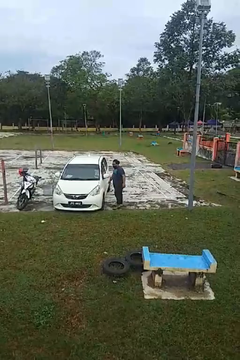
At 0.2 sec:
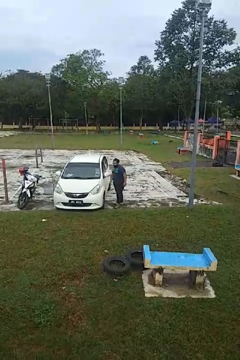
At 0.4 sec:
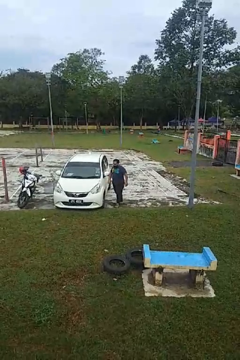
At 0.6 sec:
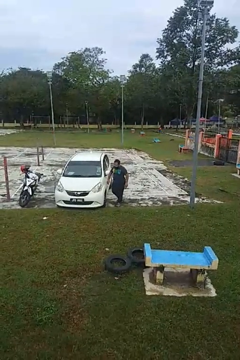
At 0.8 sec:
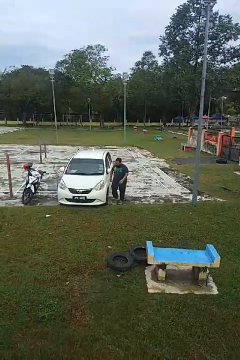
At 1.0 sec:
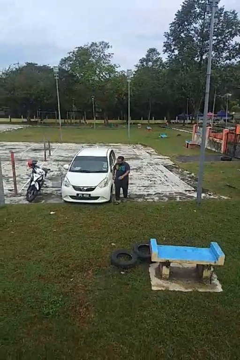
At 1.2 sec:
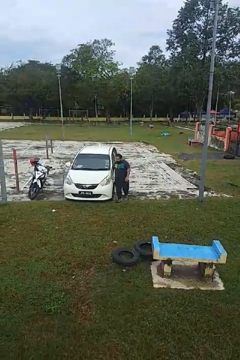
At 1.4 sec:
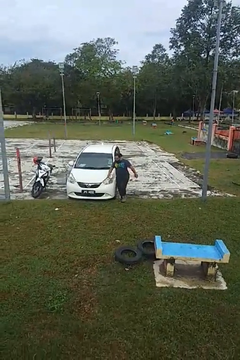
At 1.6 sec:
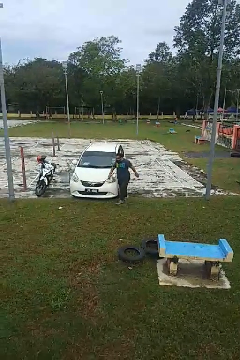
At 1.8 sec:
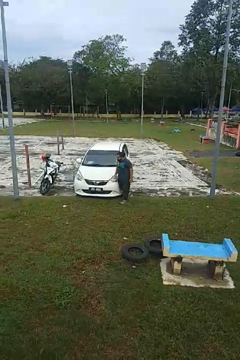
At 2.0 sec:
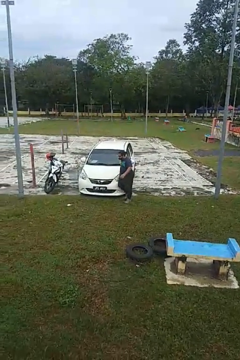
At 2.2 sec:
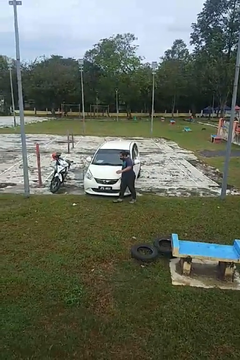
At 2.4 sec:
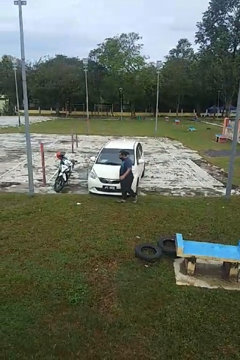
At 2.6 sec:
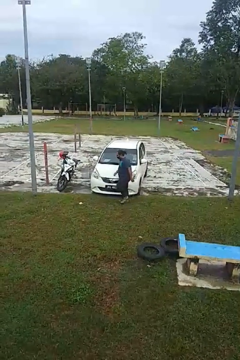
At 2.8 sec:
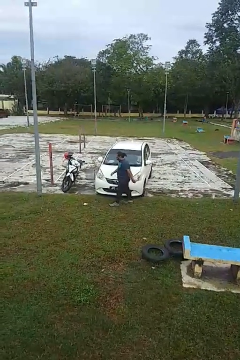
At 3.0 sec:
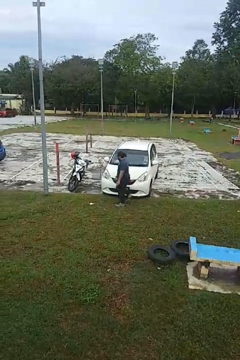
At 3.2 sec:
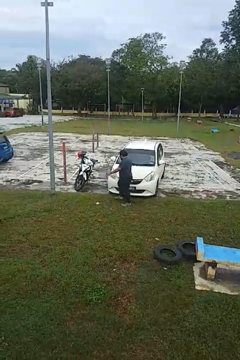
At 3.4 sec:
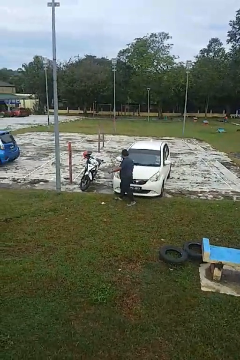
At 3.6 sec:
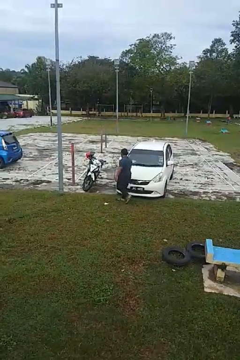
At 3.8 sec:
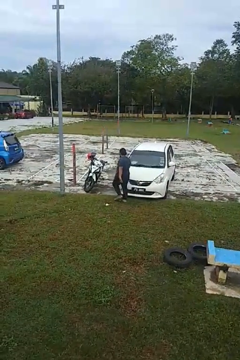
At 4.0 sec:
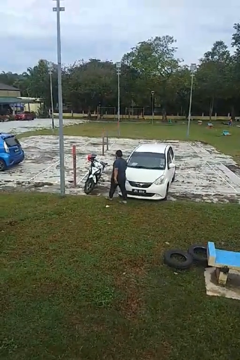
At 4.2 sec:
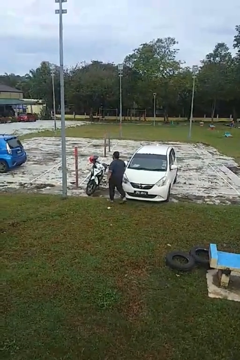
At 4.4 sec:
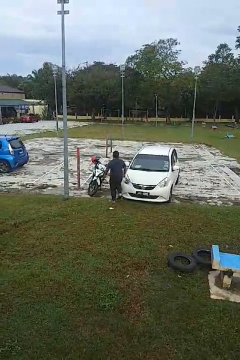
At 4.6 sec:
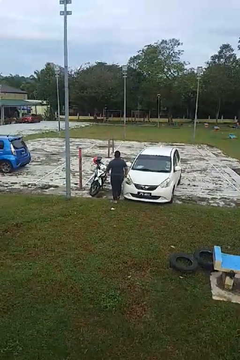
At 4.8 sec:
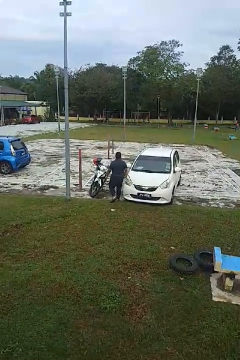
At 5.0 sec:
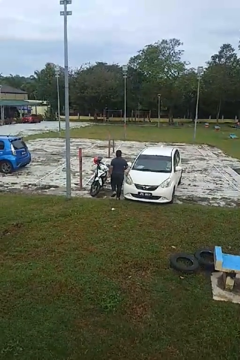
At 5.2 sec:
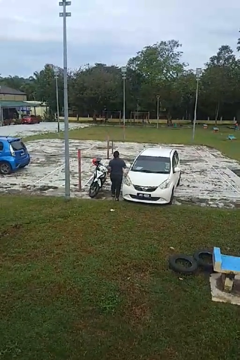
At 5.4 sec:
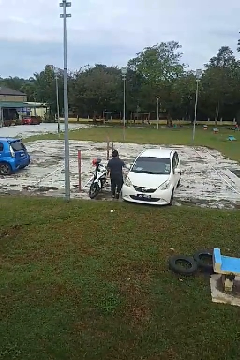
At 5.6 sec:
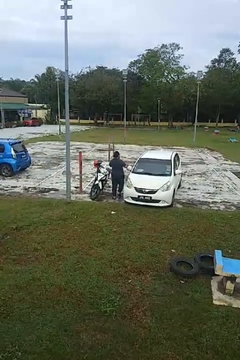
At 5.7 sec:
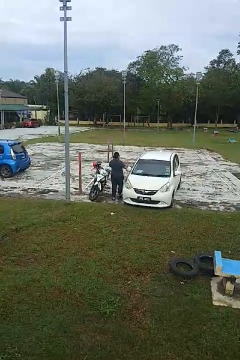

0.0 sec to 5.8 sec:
person walks around car

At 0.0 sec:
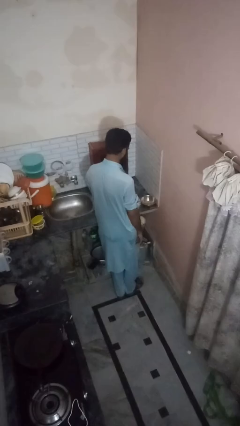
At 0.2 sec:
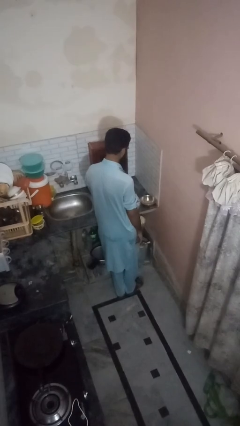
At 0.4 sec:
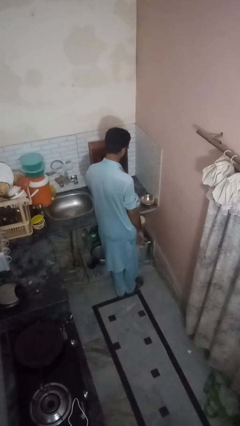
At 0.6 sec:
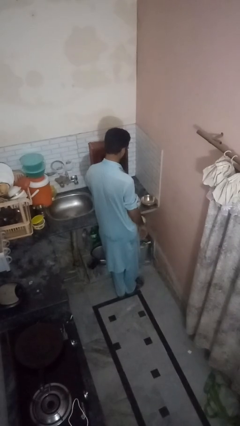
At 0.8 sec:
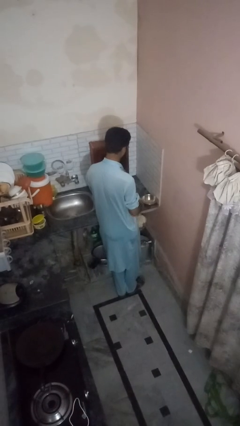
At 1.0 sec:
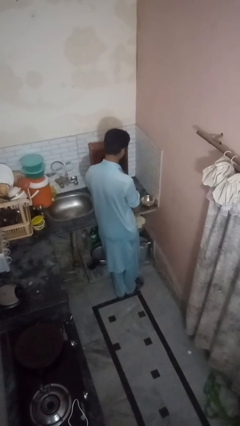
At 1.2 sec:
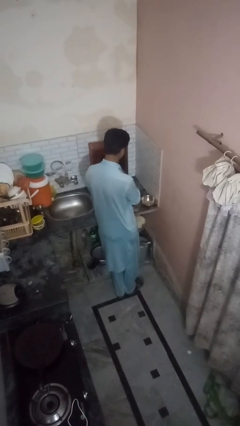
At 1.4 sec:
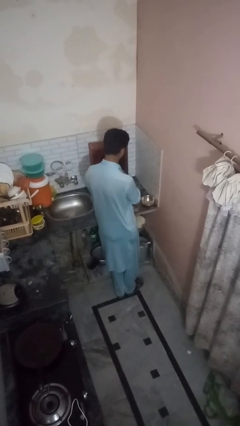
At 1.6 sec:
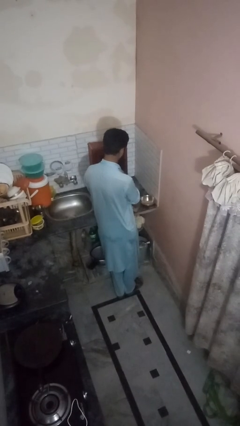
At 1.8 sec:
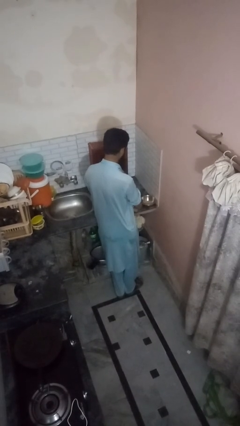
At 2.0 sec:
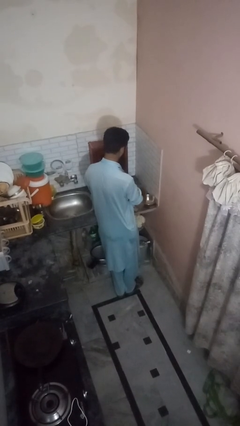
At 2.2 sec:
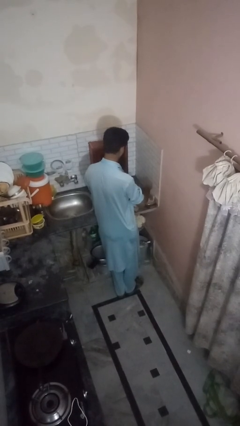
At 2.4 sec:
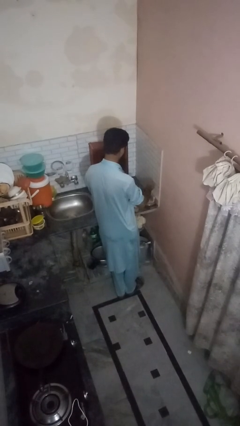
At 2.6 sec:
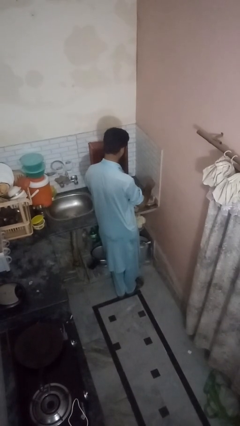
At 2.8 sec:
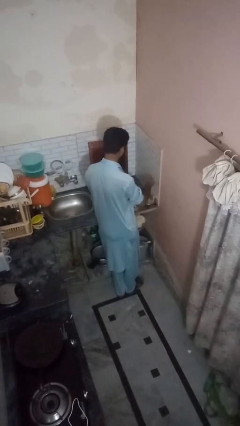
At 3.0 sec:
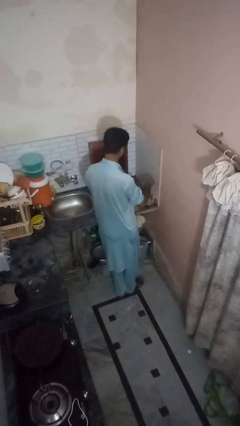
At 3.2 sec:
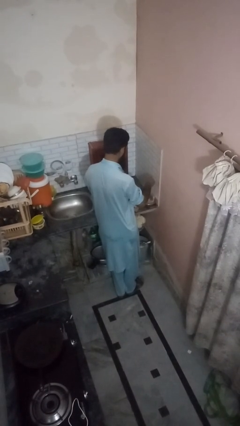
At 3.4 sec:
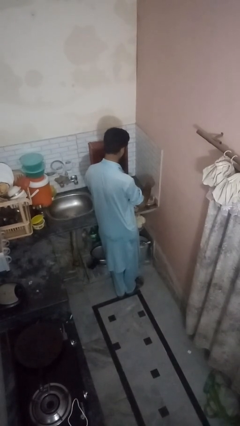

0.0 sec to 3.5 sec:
person pours into bowl

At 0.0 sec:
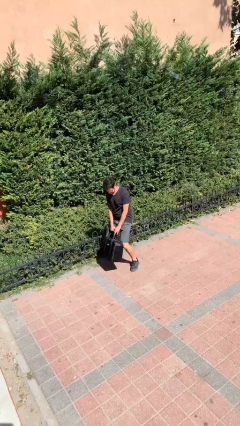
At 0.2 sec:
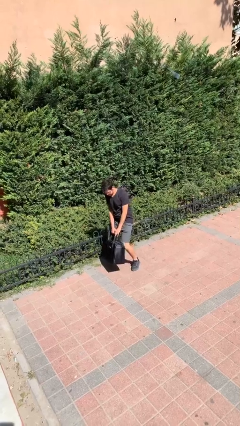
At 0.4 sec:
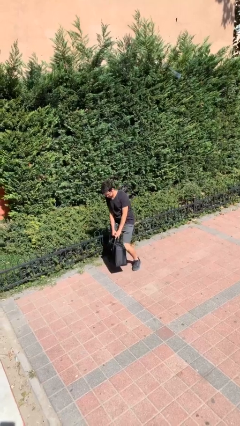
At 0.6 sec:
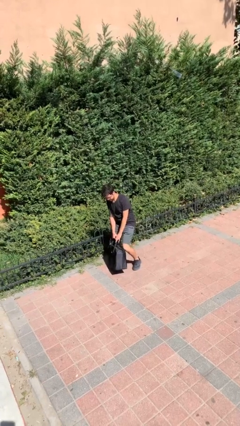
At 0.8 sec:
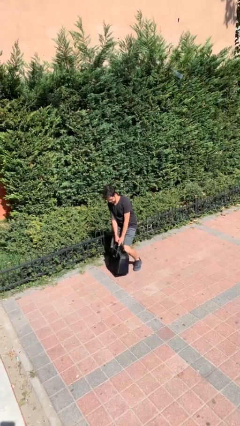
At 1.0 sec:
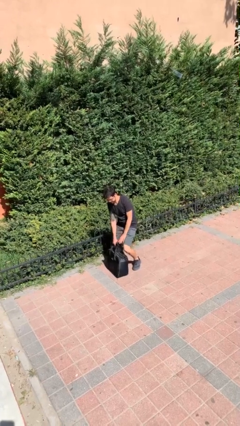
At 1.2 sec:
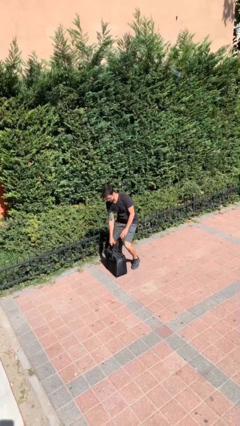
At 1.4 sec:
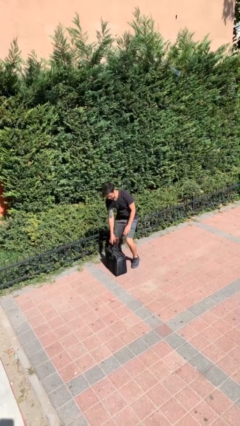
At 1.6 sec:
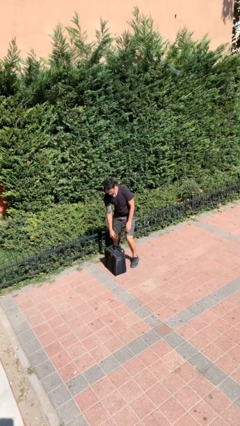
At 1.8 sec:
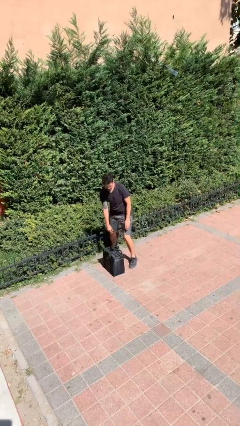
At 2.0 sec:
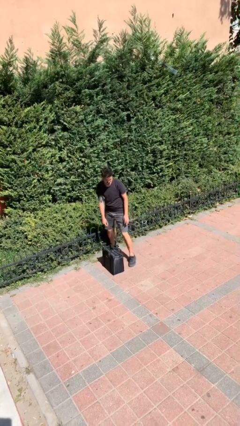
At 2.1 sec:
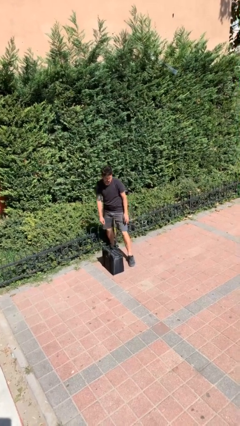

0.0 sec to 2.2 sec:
person puts down object on floor

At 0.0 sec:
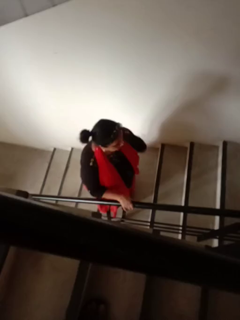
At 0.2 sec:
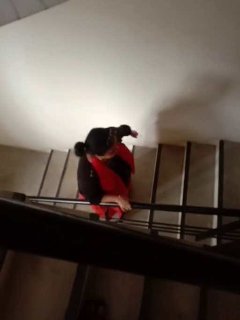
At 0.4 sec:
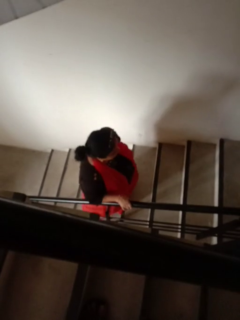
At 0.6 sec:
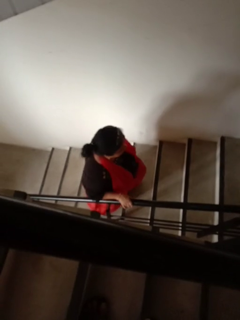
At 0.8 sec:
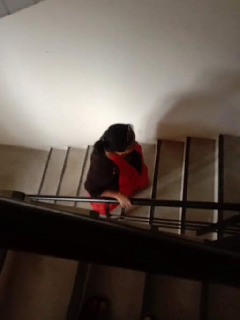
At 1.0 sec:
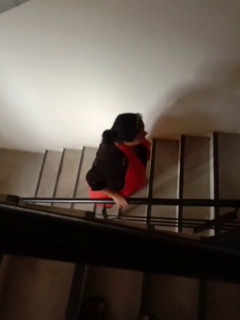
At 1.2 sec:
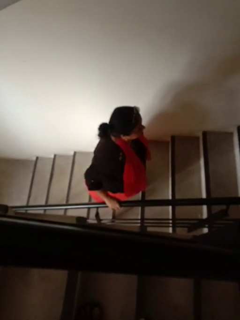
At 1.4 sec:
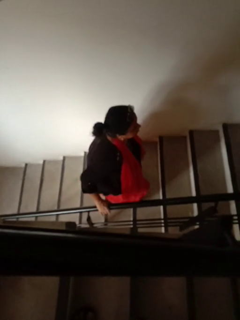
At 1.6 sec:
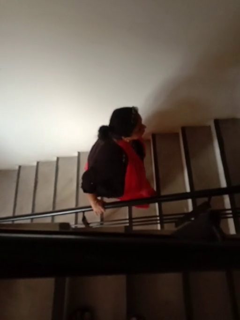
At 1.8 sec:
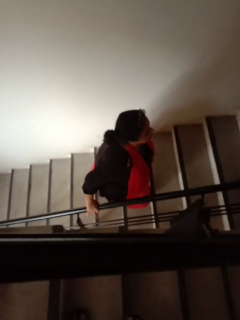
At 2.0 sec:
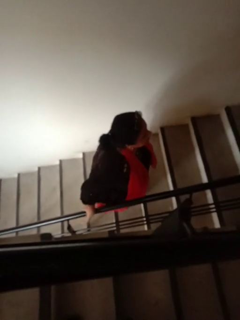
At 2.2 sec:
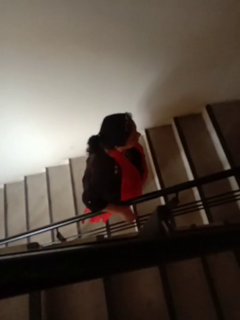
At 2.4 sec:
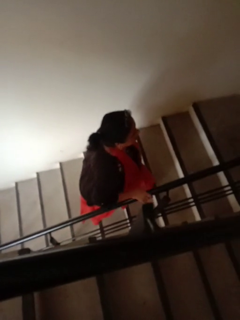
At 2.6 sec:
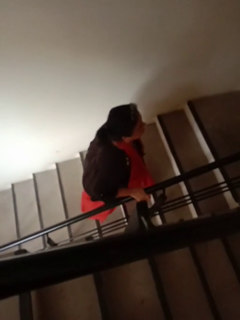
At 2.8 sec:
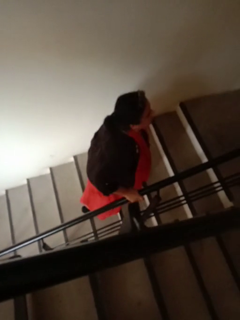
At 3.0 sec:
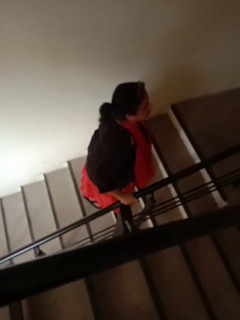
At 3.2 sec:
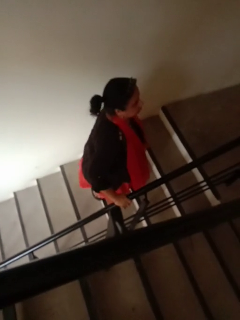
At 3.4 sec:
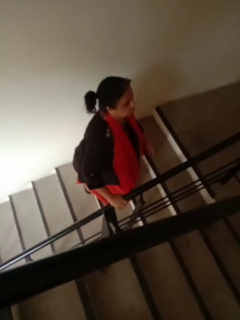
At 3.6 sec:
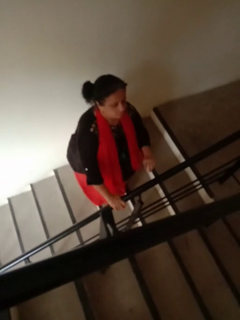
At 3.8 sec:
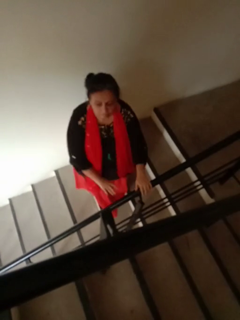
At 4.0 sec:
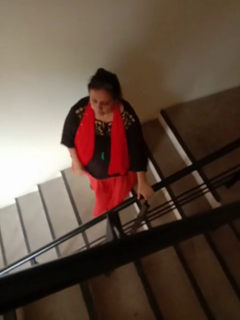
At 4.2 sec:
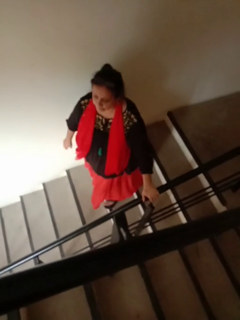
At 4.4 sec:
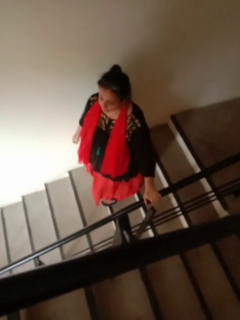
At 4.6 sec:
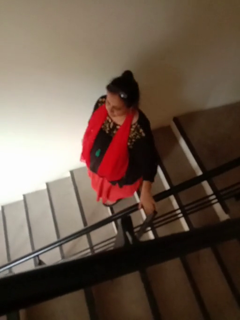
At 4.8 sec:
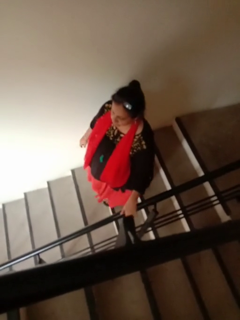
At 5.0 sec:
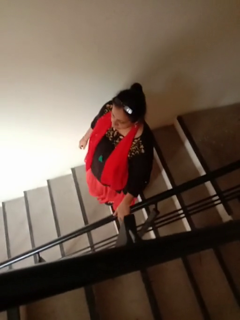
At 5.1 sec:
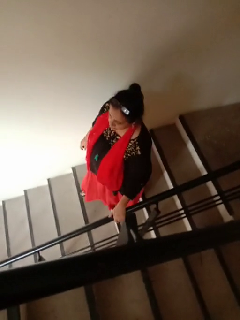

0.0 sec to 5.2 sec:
person climbs up stairs

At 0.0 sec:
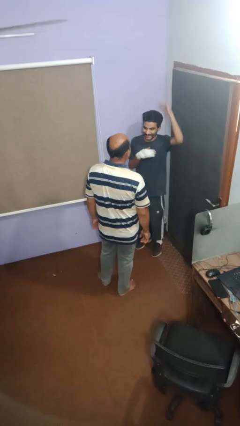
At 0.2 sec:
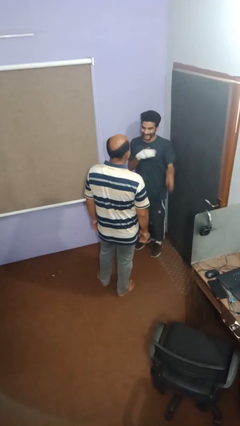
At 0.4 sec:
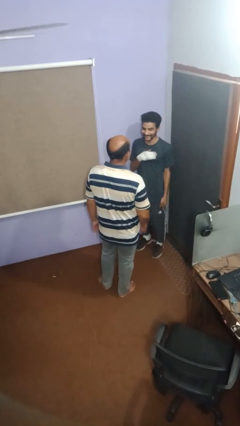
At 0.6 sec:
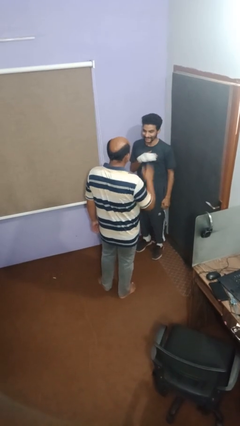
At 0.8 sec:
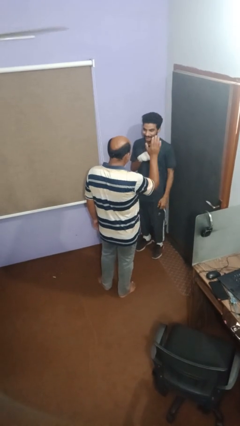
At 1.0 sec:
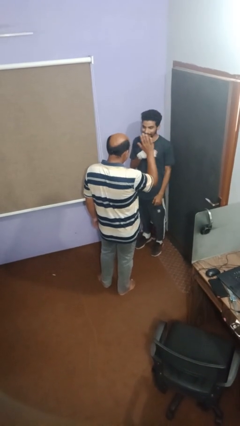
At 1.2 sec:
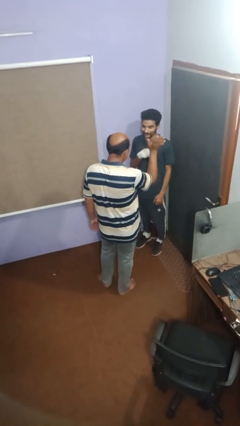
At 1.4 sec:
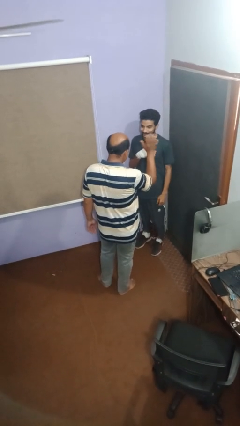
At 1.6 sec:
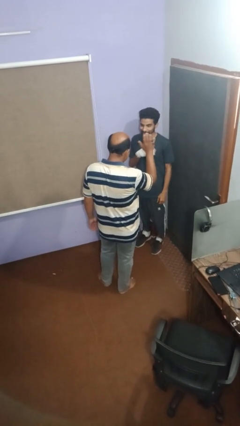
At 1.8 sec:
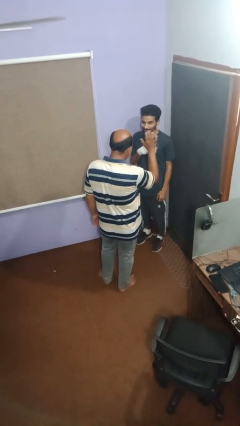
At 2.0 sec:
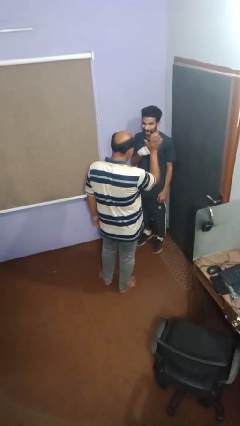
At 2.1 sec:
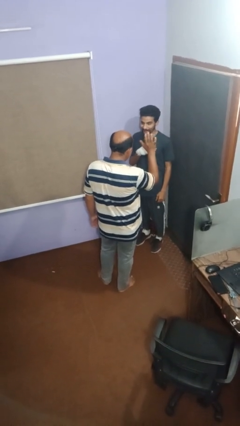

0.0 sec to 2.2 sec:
person waves at person

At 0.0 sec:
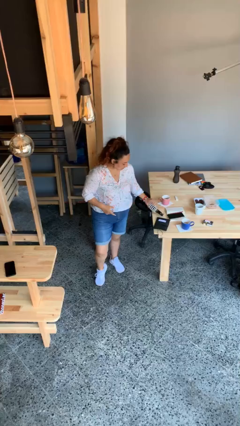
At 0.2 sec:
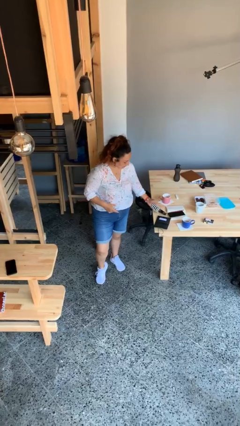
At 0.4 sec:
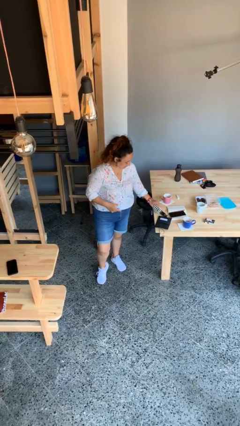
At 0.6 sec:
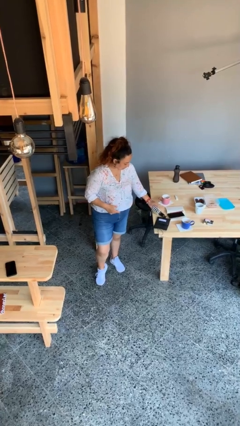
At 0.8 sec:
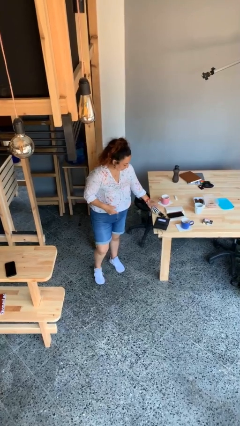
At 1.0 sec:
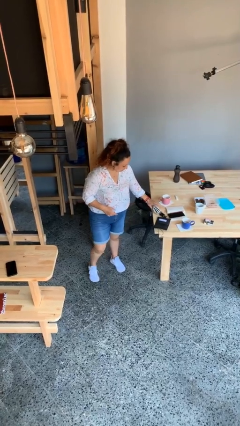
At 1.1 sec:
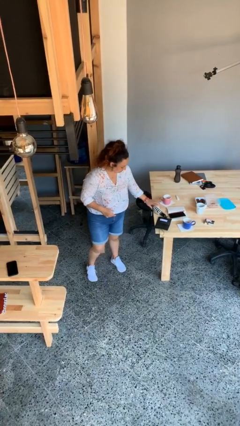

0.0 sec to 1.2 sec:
person puts down object on table
